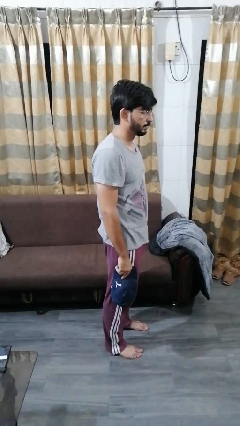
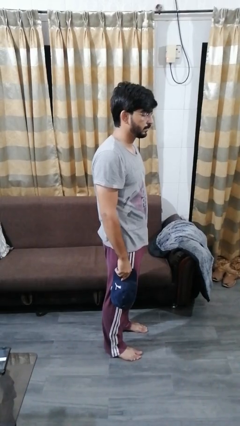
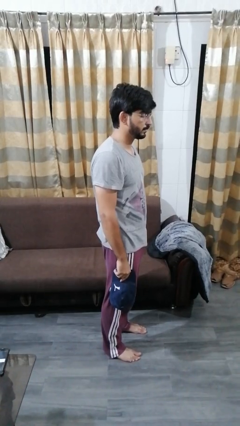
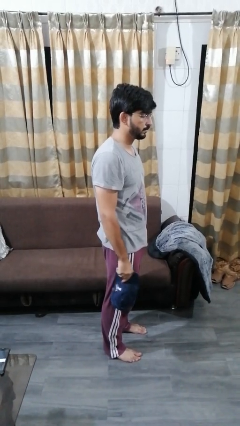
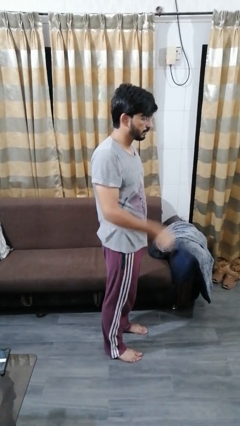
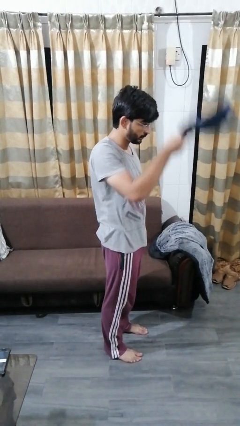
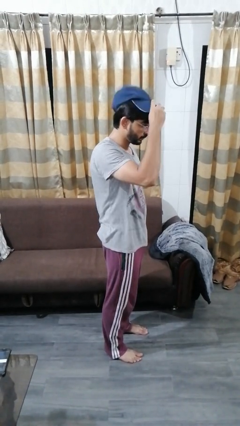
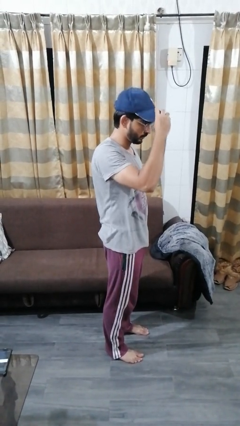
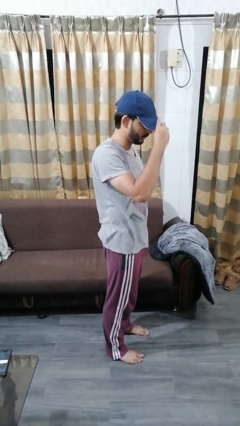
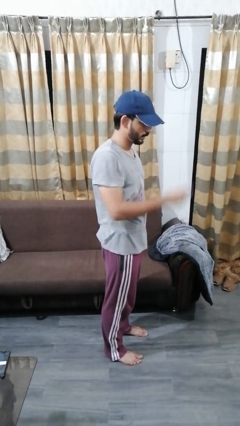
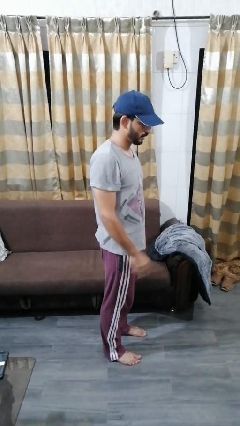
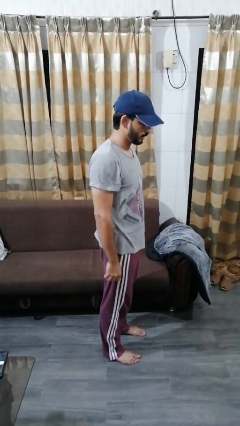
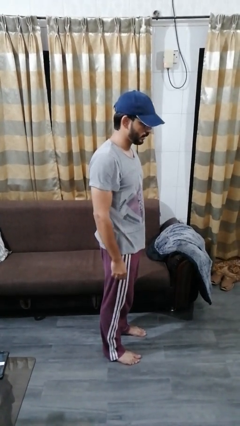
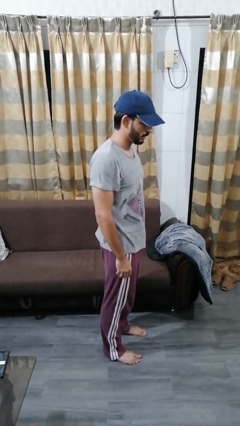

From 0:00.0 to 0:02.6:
person puts on hat

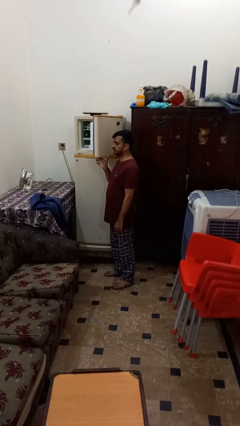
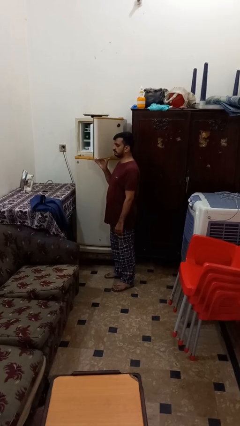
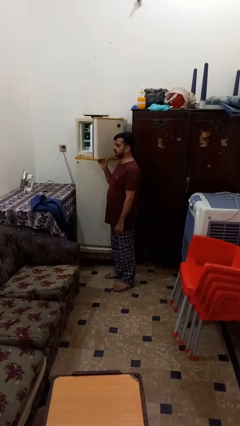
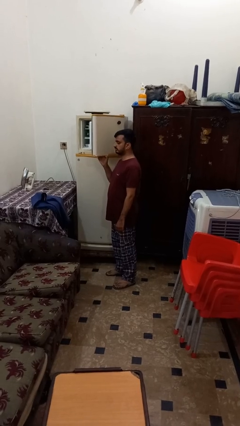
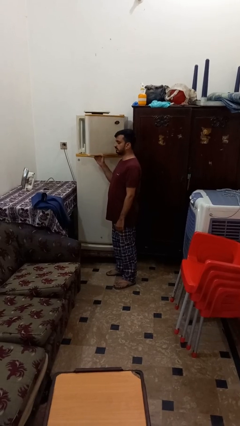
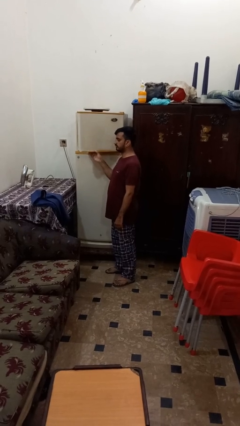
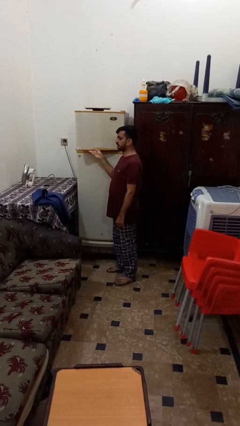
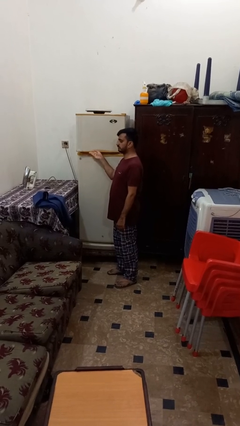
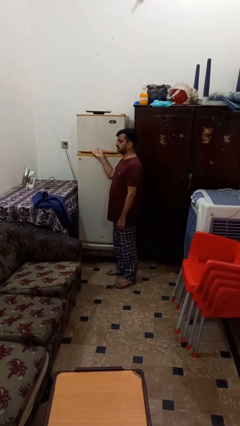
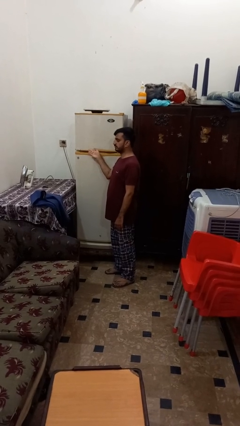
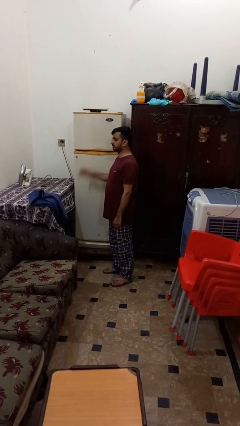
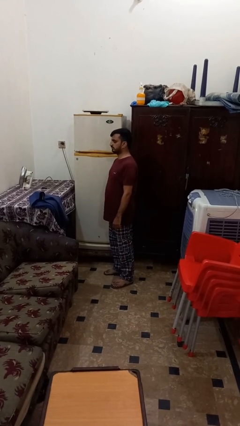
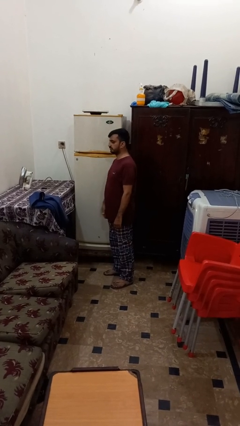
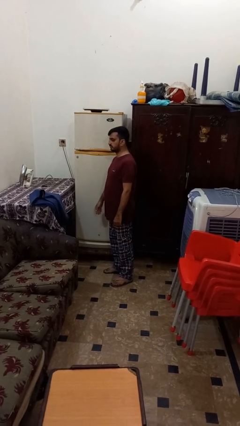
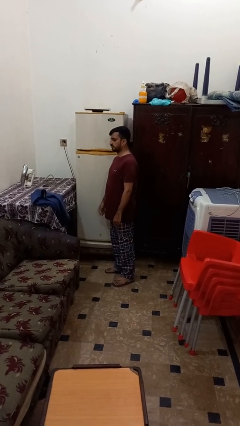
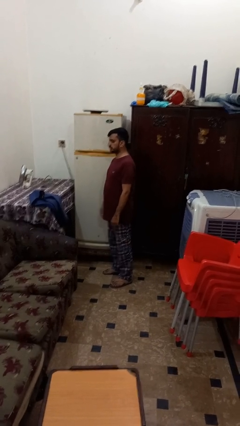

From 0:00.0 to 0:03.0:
person closes refrigerator

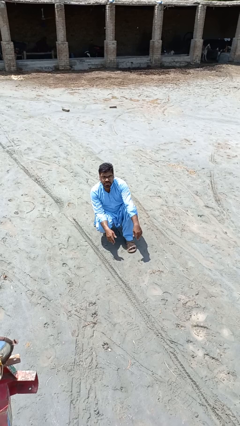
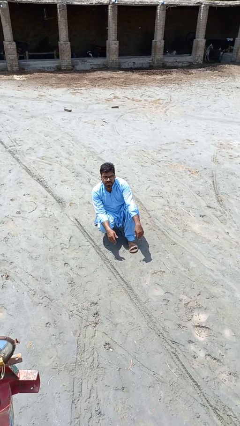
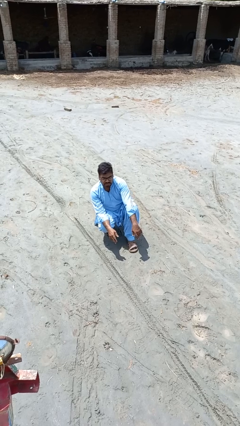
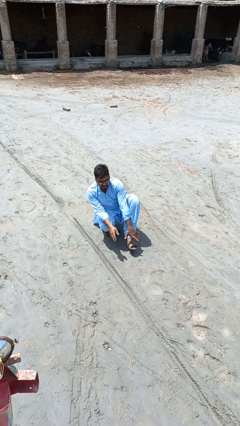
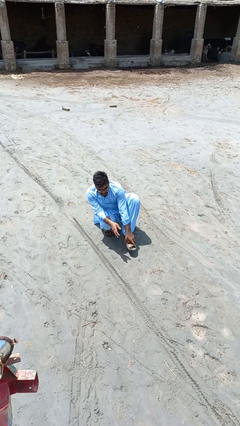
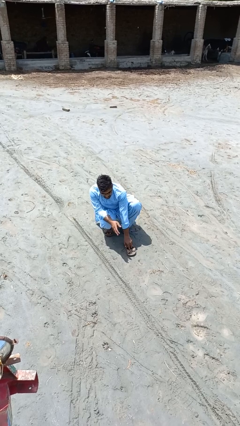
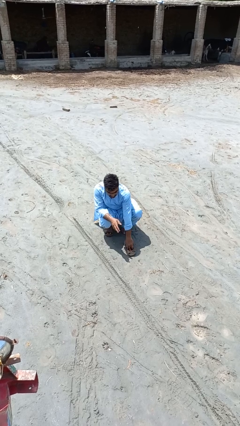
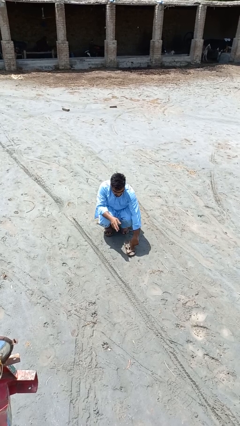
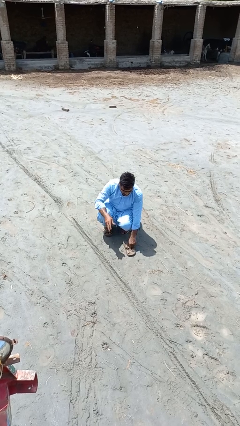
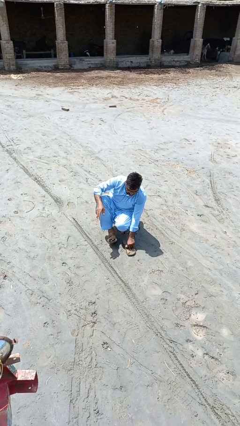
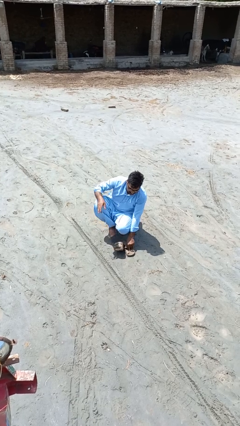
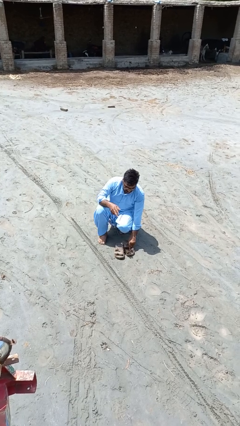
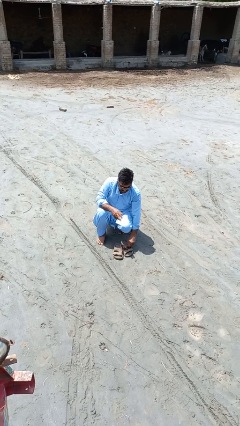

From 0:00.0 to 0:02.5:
person takes off shoes

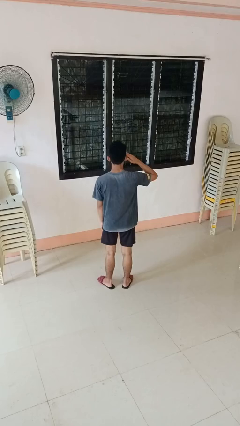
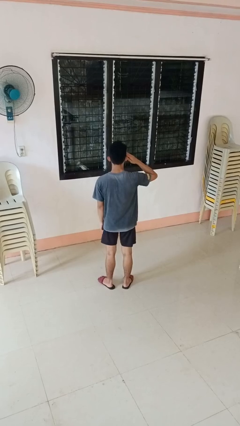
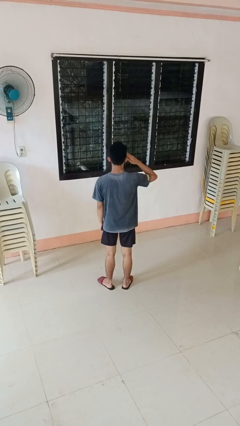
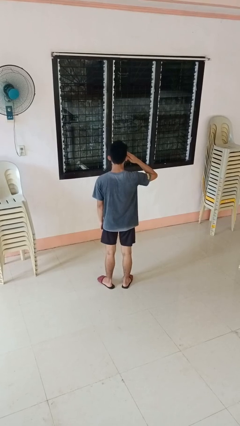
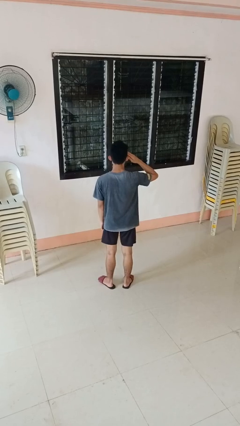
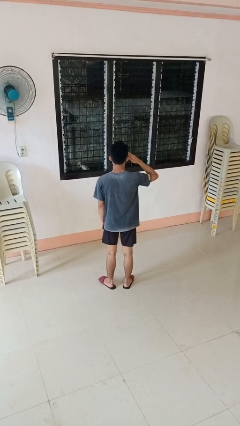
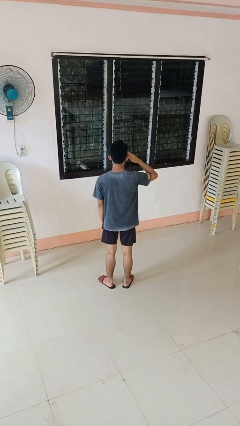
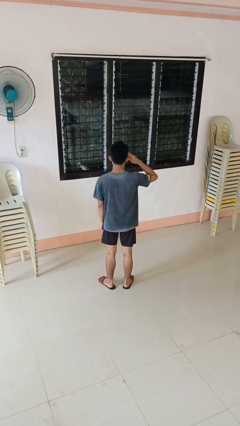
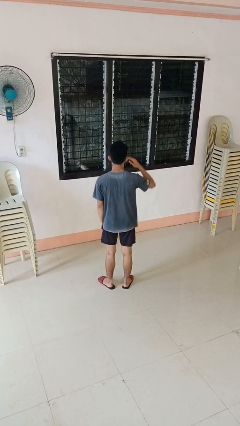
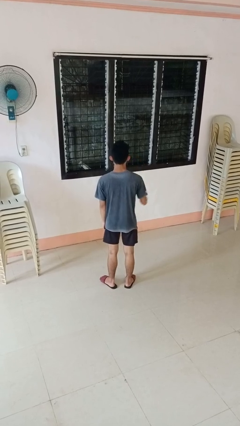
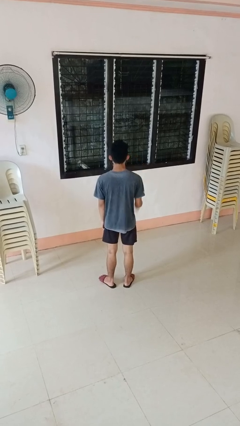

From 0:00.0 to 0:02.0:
person salutes

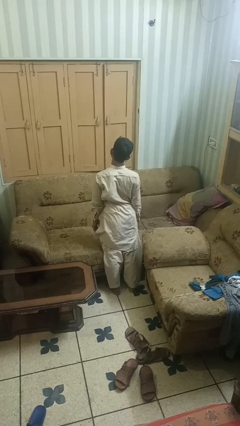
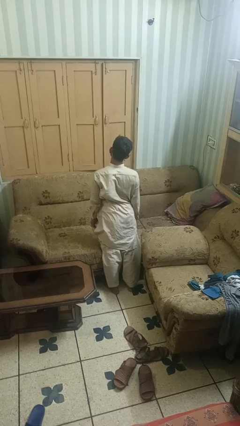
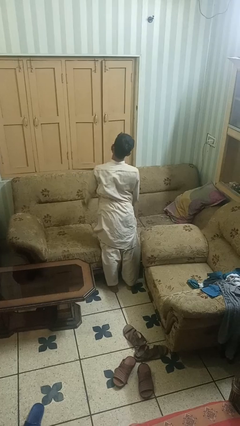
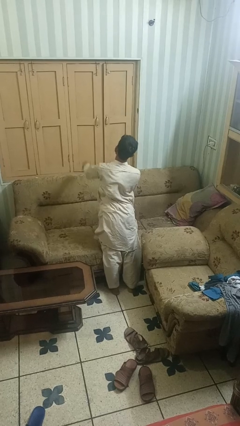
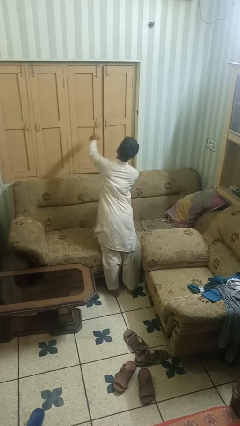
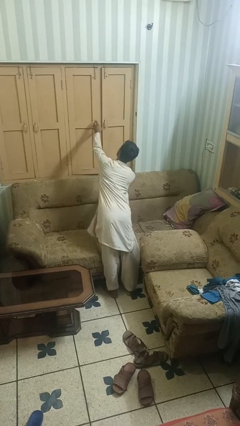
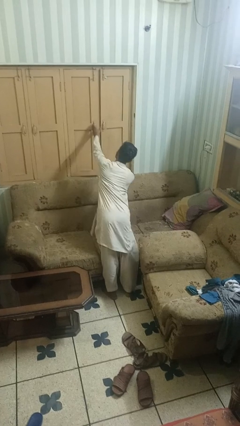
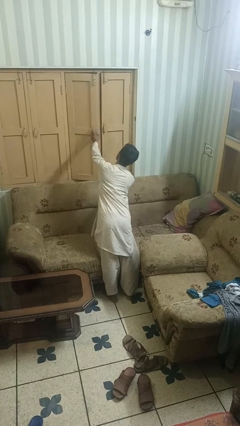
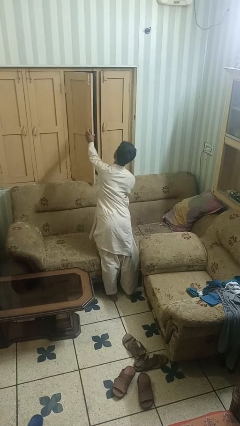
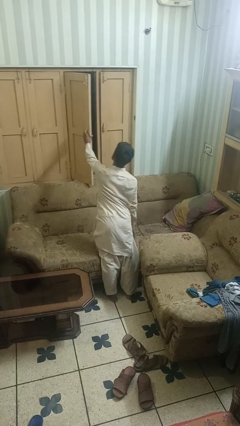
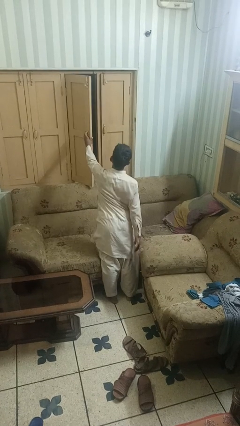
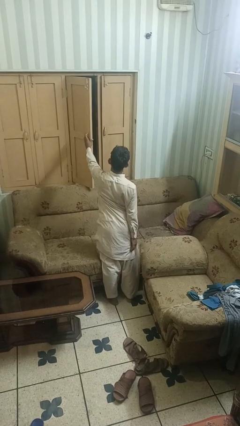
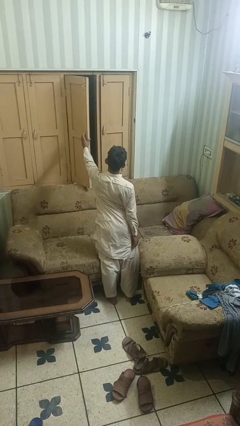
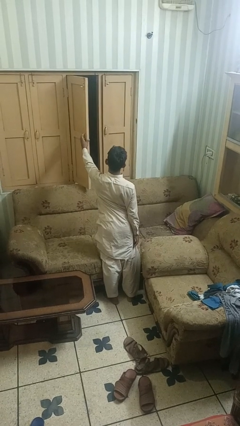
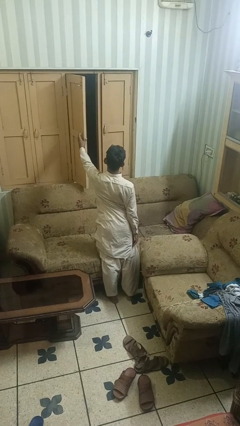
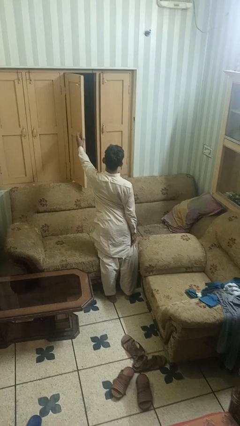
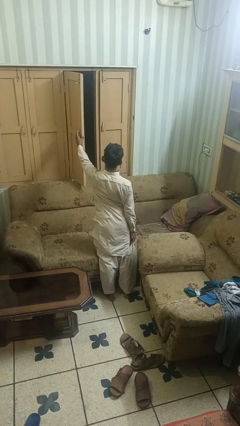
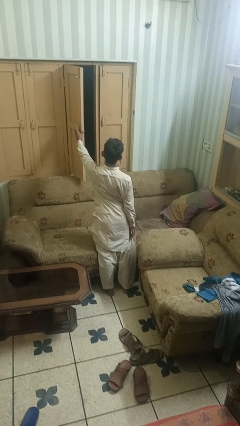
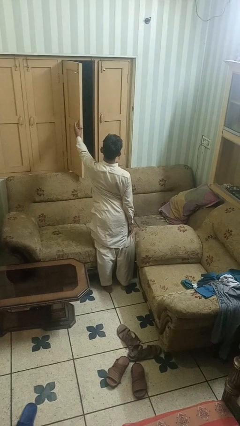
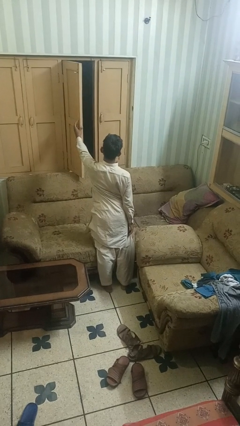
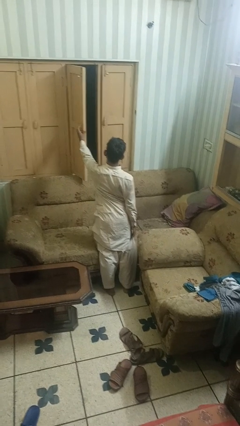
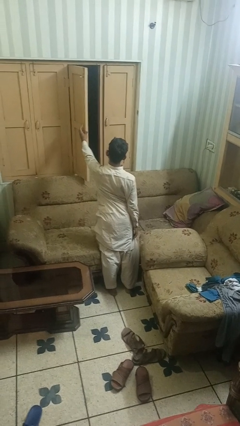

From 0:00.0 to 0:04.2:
person opens home window

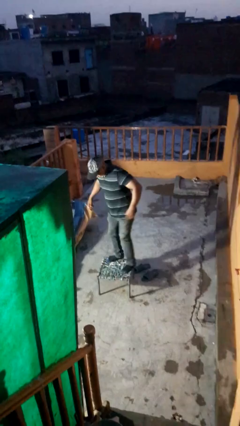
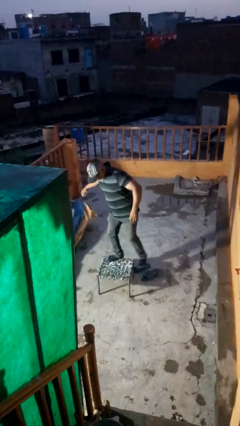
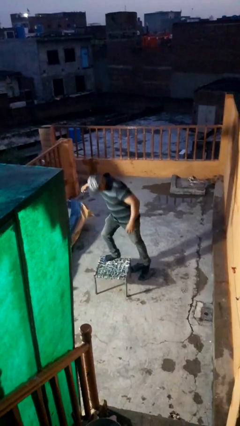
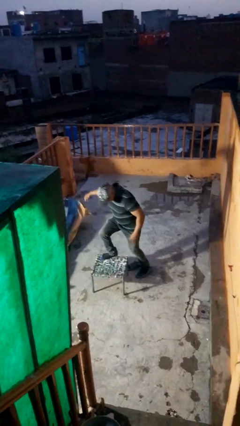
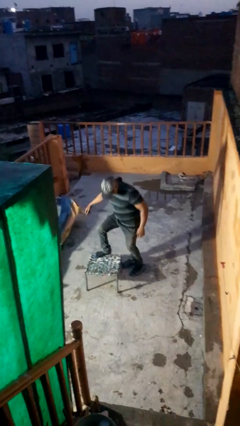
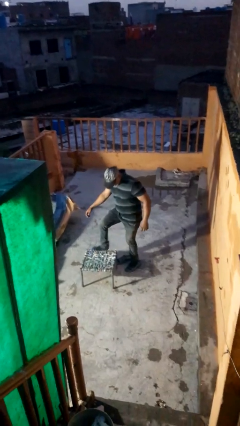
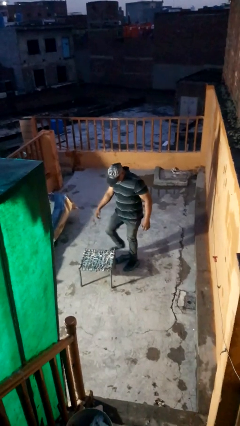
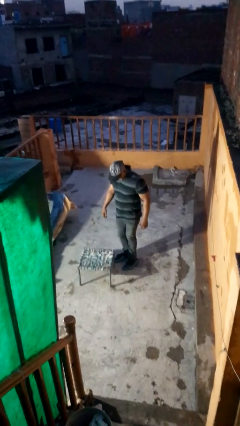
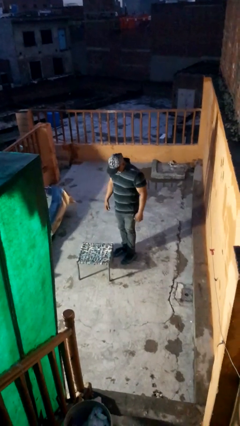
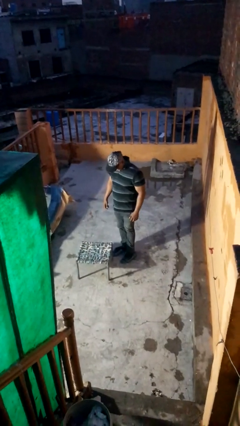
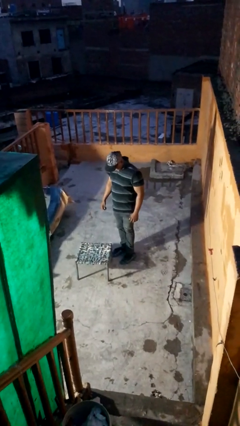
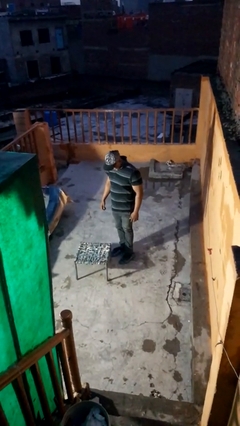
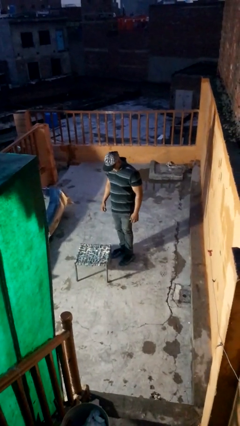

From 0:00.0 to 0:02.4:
person climbs off table

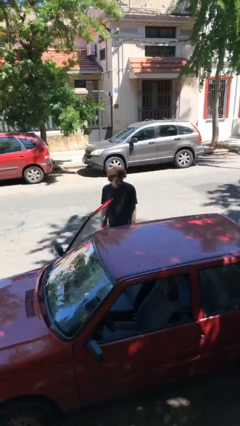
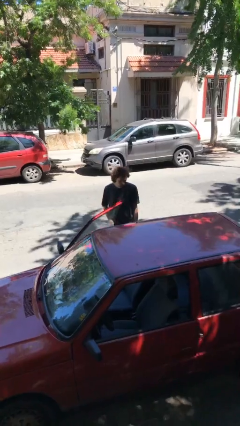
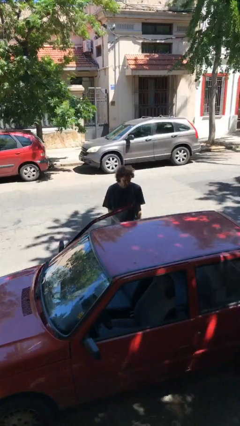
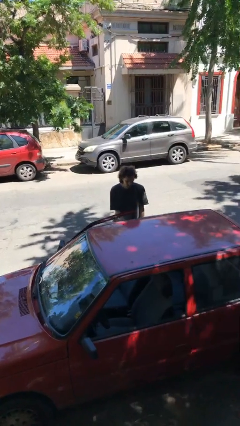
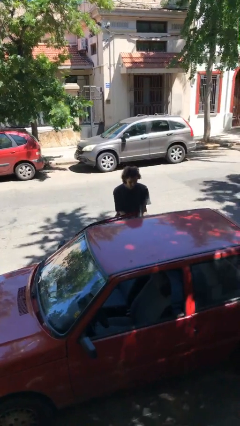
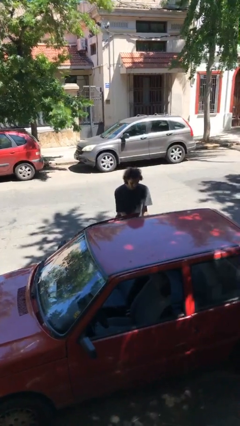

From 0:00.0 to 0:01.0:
person closes car door
